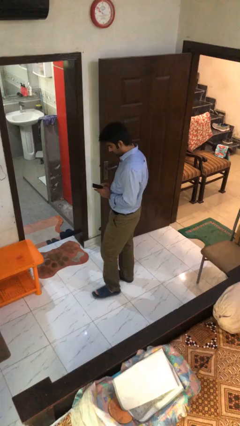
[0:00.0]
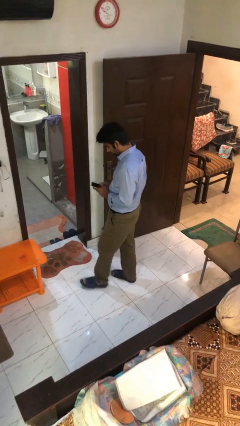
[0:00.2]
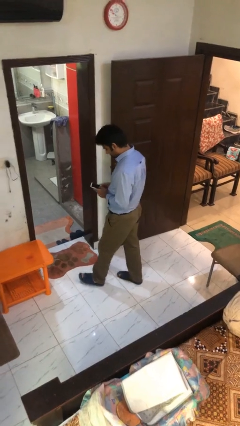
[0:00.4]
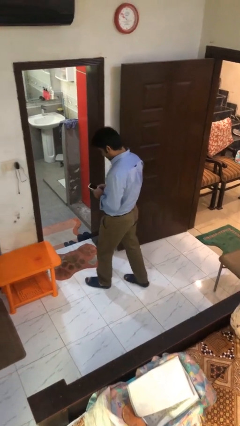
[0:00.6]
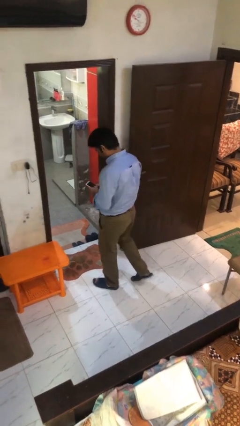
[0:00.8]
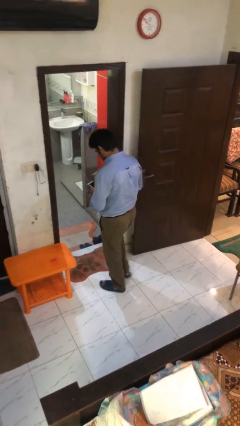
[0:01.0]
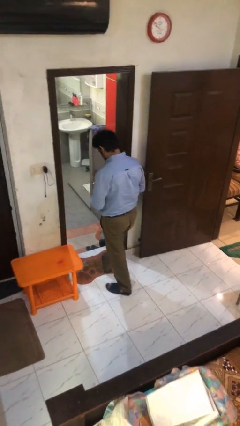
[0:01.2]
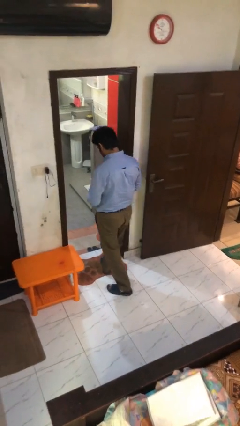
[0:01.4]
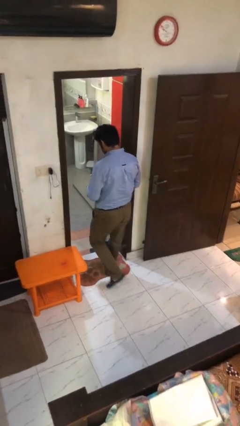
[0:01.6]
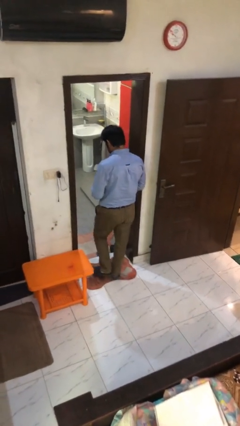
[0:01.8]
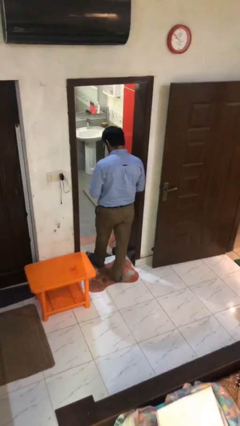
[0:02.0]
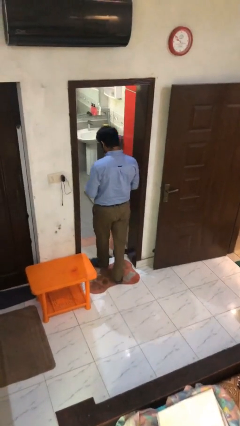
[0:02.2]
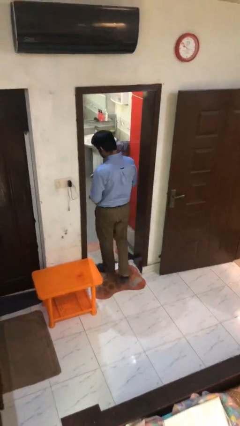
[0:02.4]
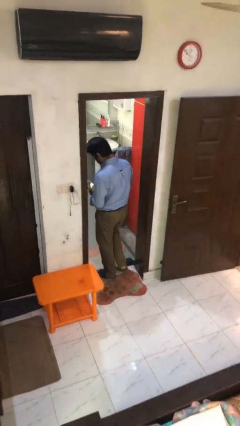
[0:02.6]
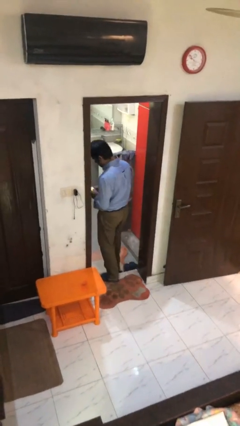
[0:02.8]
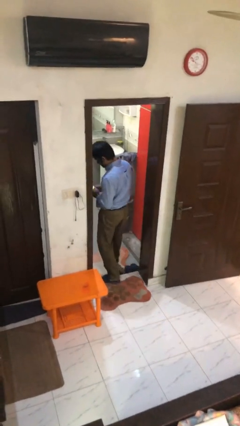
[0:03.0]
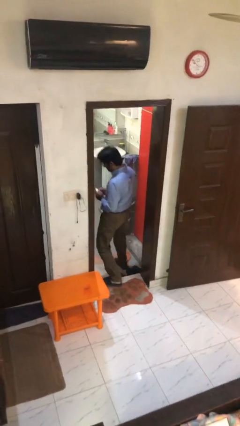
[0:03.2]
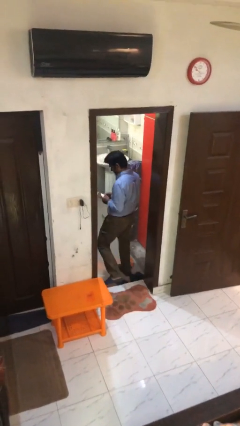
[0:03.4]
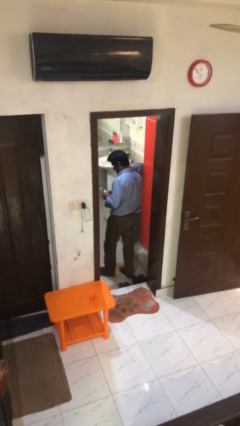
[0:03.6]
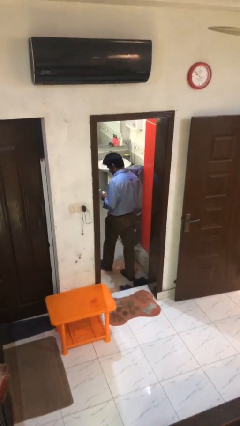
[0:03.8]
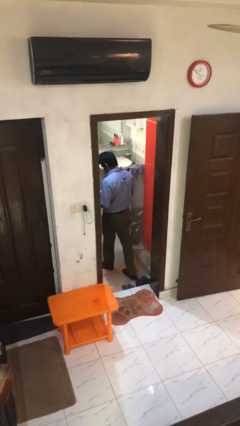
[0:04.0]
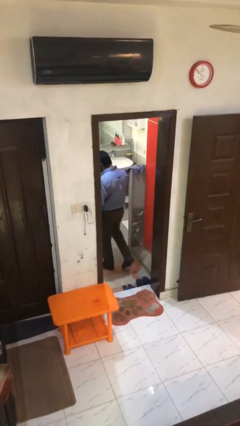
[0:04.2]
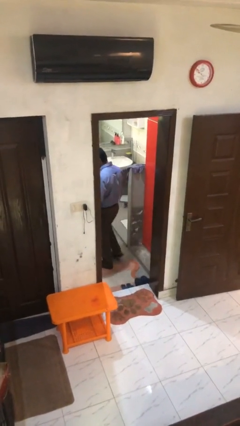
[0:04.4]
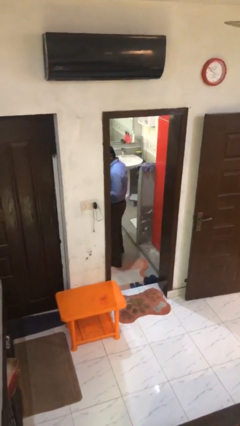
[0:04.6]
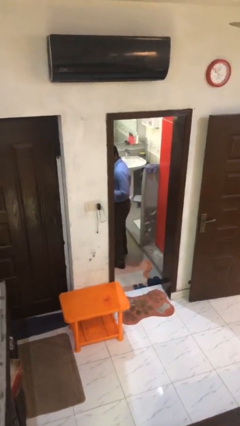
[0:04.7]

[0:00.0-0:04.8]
person exits scene through structure

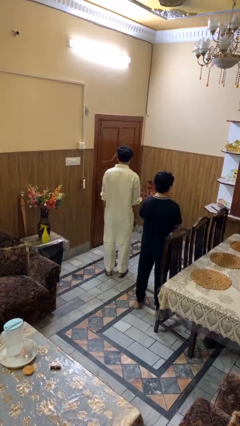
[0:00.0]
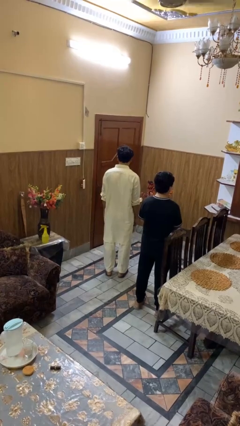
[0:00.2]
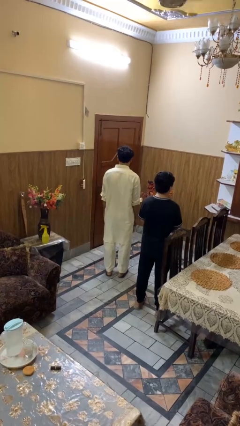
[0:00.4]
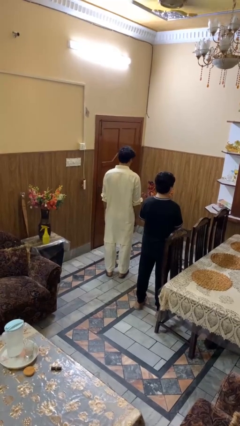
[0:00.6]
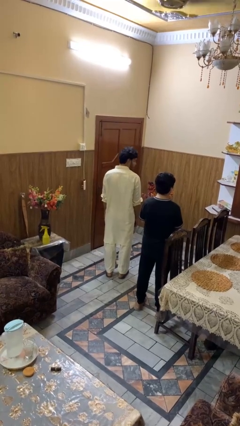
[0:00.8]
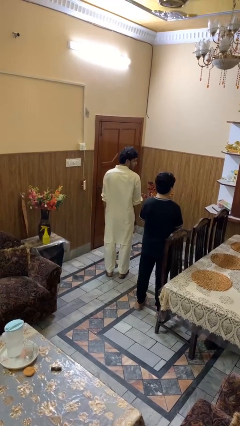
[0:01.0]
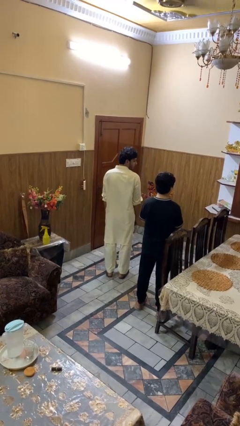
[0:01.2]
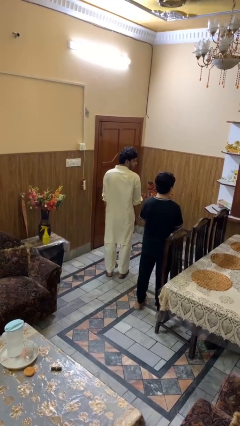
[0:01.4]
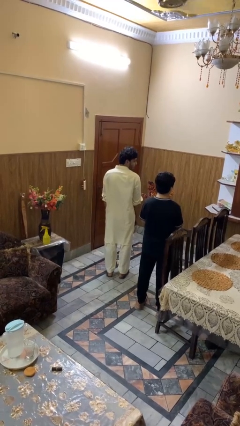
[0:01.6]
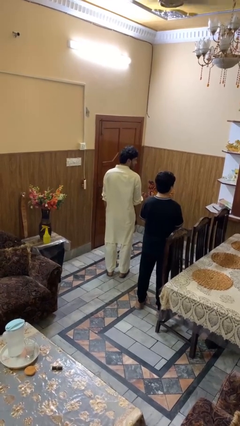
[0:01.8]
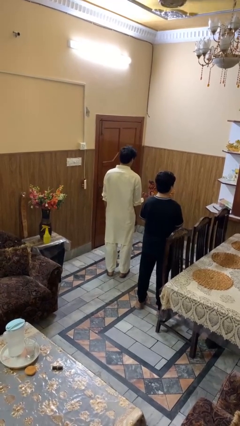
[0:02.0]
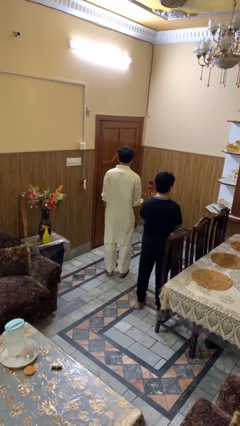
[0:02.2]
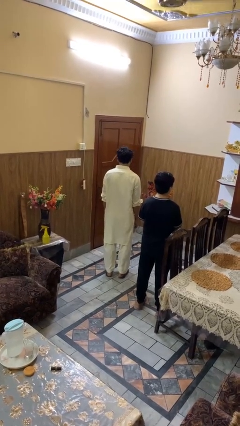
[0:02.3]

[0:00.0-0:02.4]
person looks over shoulder

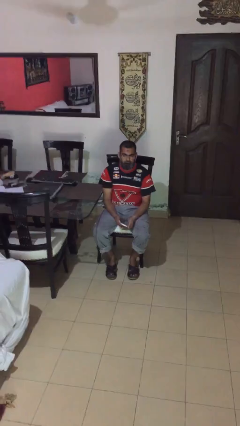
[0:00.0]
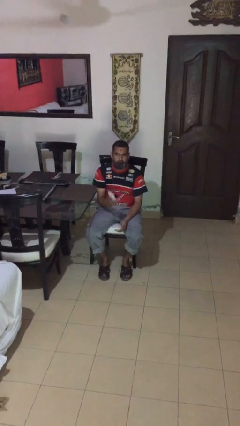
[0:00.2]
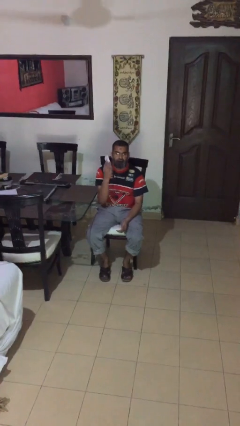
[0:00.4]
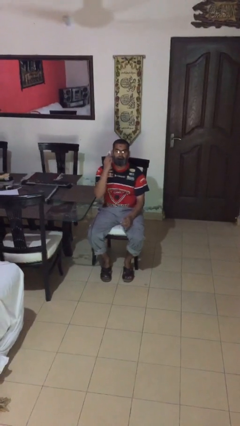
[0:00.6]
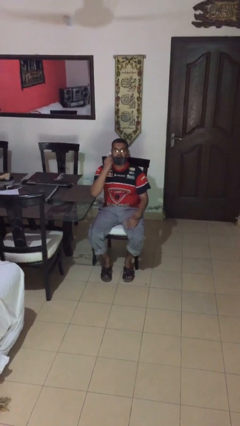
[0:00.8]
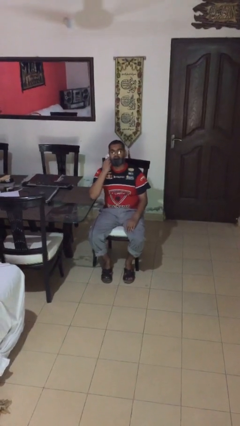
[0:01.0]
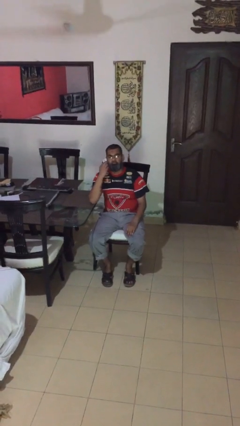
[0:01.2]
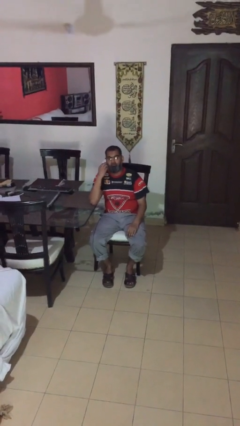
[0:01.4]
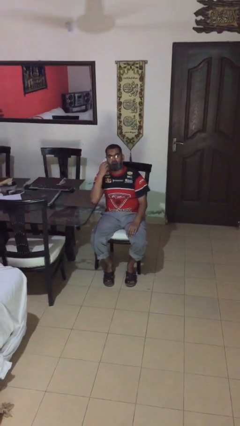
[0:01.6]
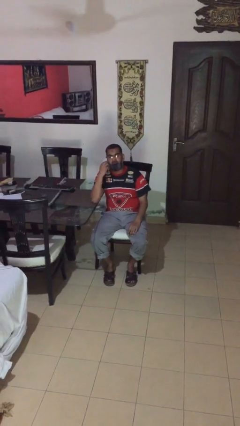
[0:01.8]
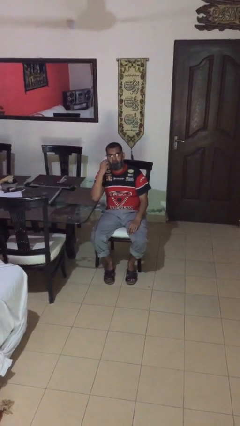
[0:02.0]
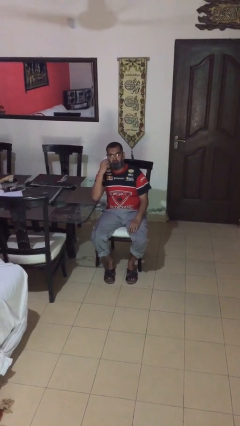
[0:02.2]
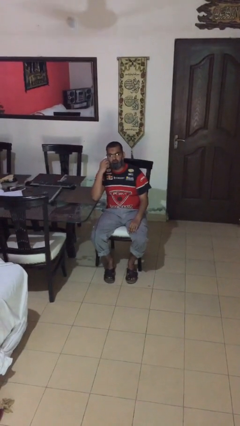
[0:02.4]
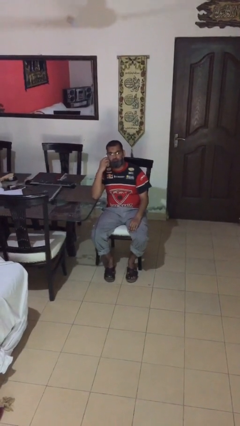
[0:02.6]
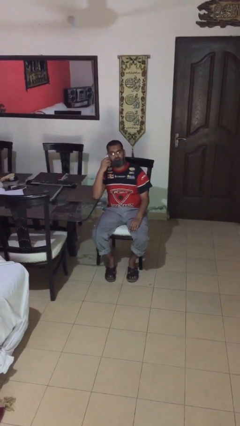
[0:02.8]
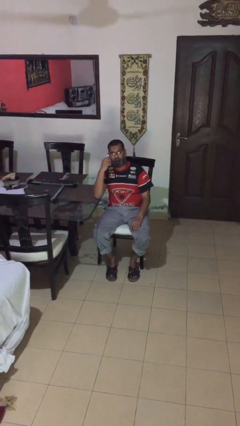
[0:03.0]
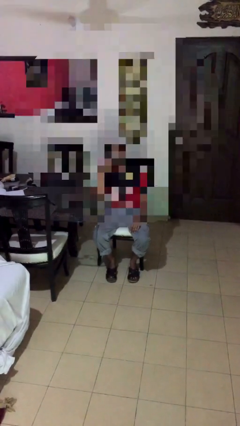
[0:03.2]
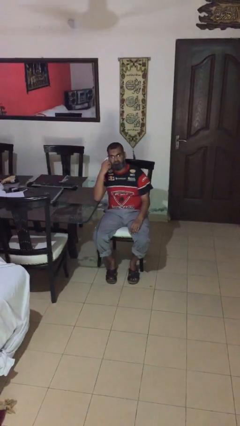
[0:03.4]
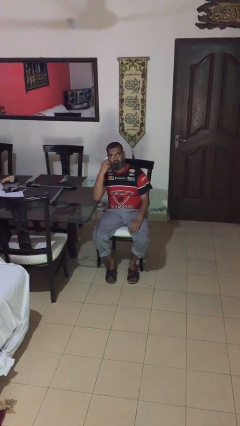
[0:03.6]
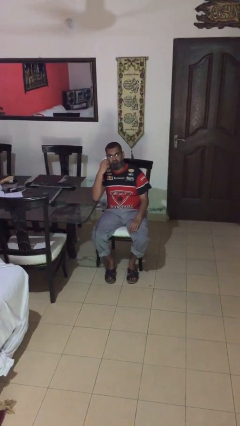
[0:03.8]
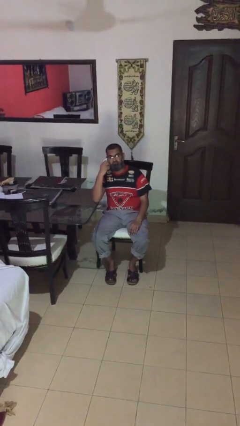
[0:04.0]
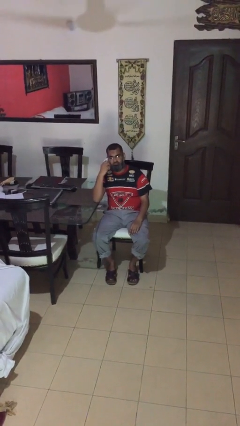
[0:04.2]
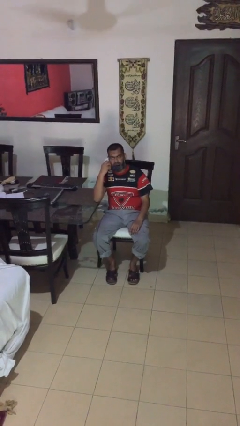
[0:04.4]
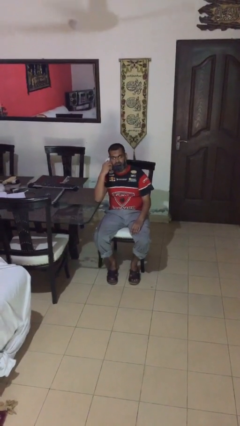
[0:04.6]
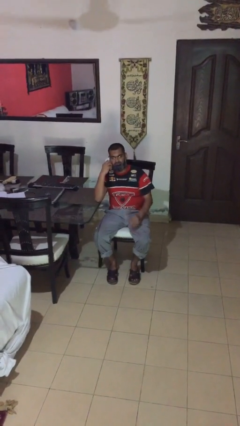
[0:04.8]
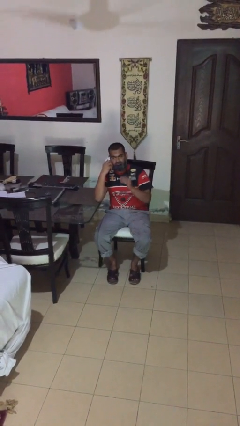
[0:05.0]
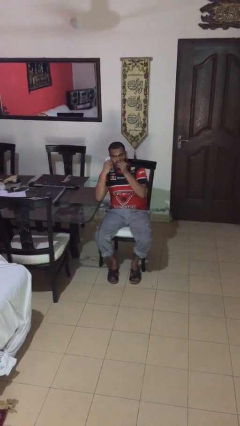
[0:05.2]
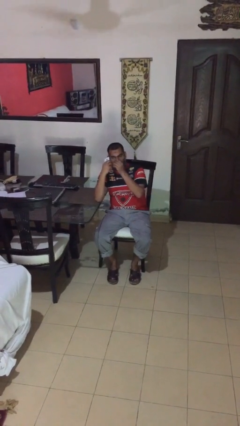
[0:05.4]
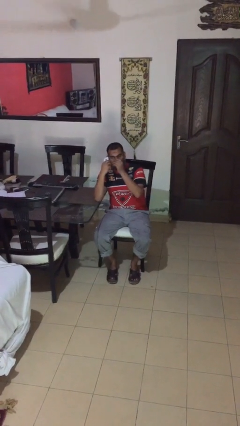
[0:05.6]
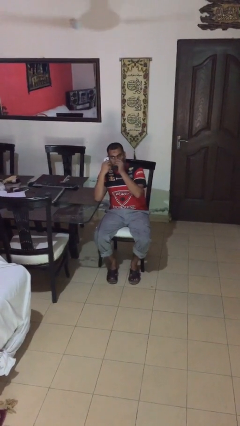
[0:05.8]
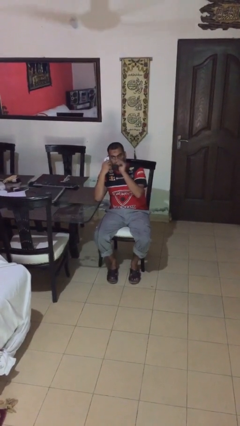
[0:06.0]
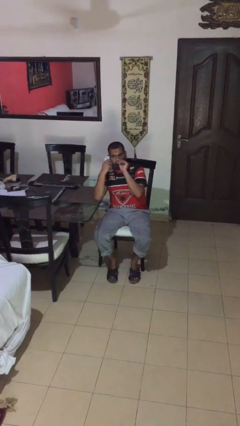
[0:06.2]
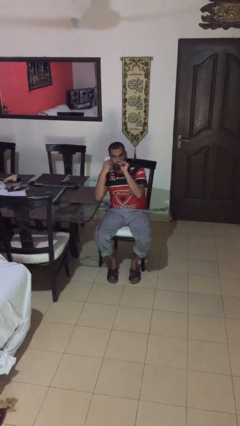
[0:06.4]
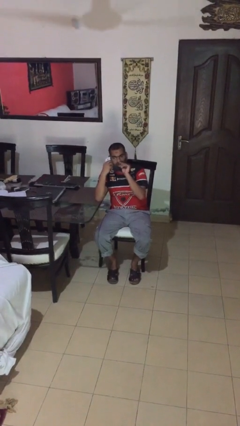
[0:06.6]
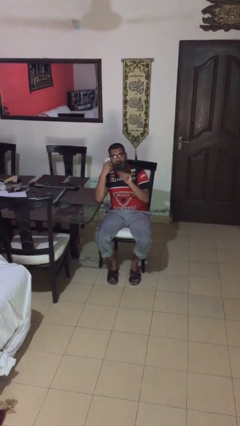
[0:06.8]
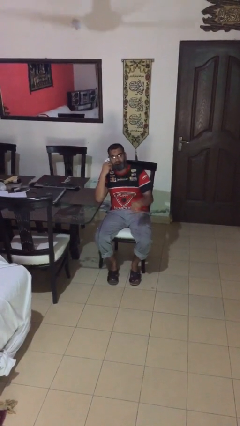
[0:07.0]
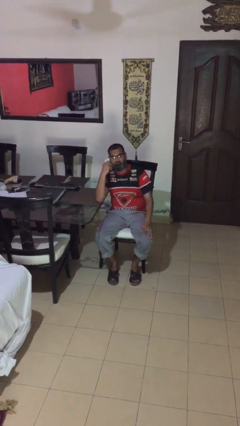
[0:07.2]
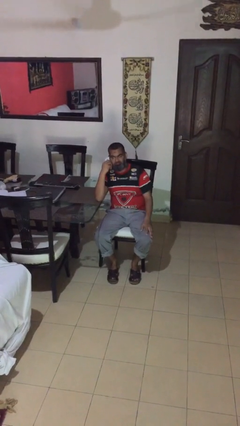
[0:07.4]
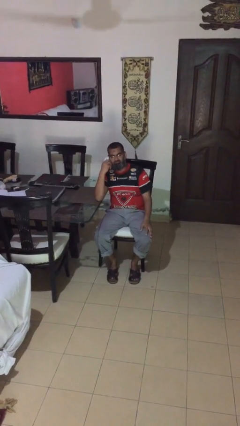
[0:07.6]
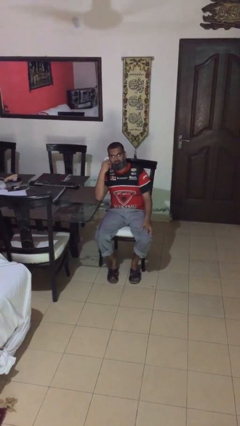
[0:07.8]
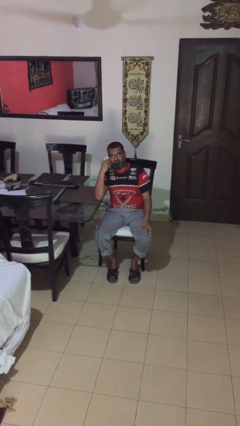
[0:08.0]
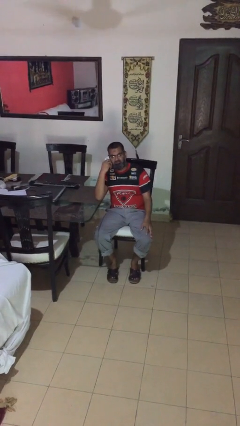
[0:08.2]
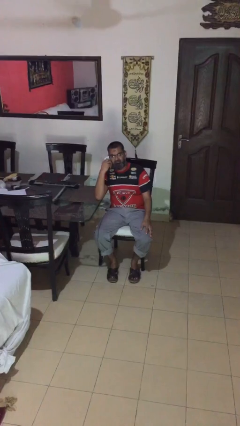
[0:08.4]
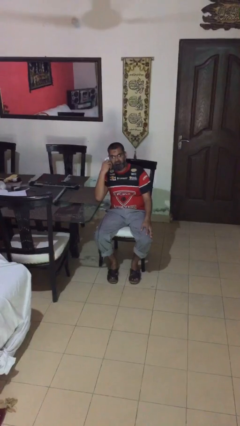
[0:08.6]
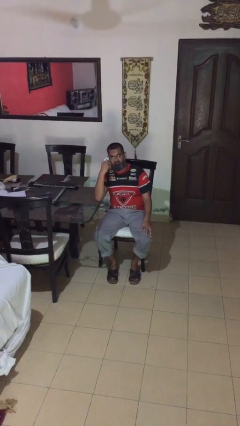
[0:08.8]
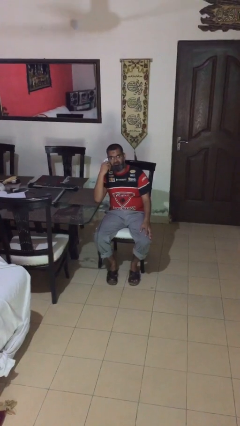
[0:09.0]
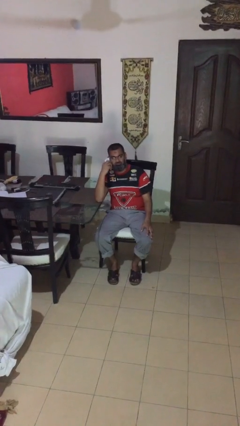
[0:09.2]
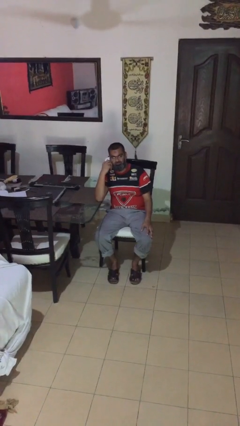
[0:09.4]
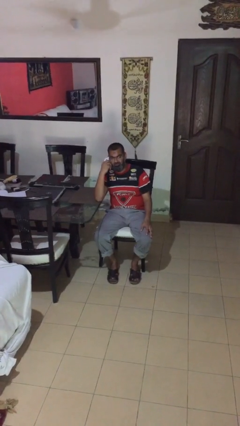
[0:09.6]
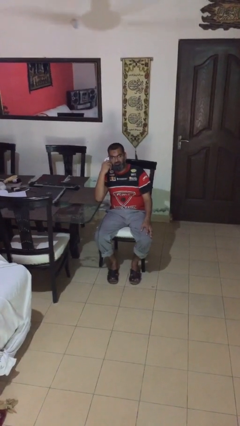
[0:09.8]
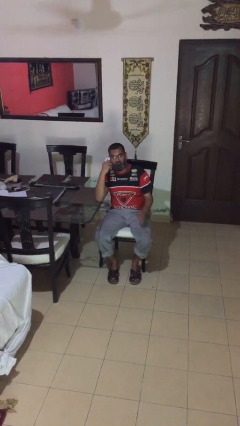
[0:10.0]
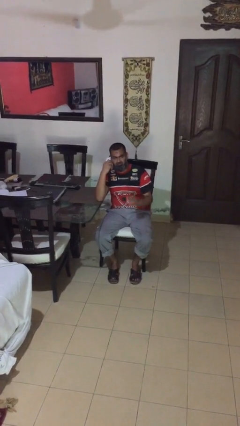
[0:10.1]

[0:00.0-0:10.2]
person talks on phone

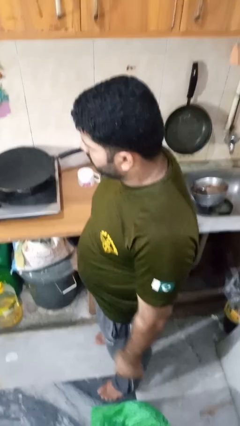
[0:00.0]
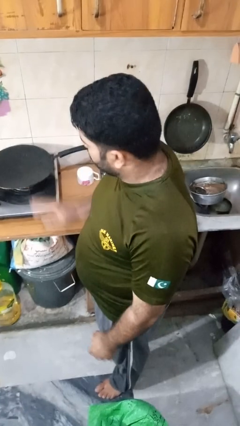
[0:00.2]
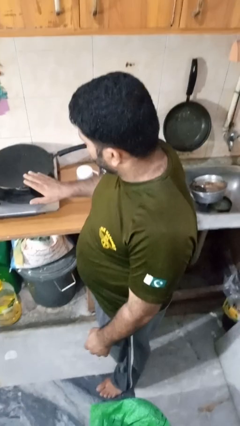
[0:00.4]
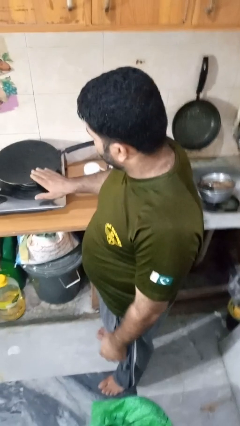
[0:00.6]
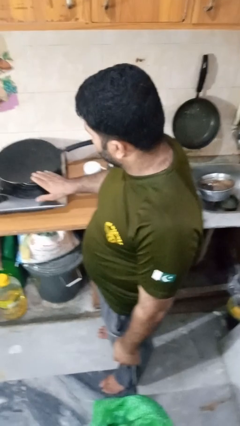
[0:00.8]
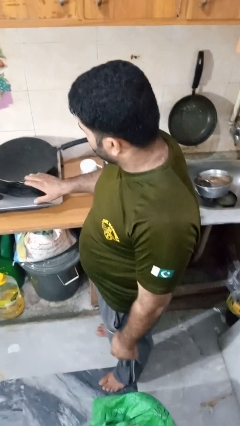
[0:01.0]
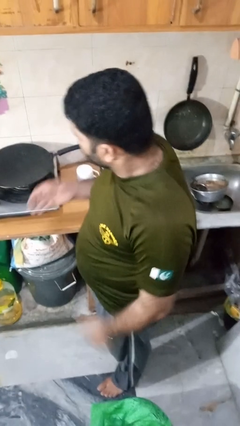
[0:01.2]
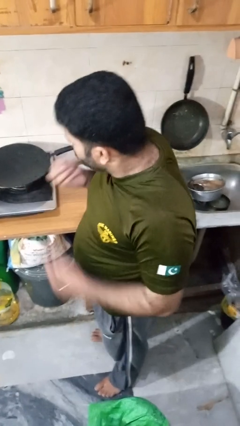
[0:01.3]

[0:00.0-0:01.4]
person burns hand
